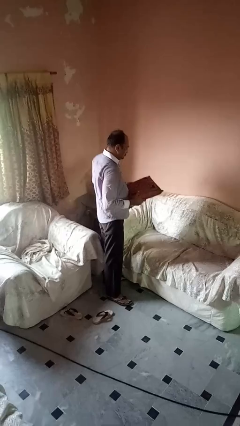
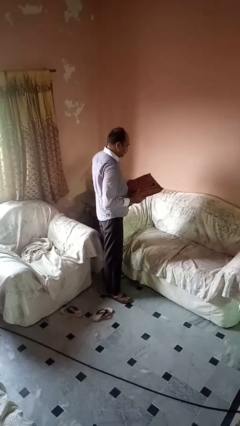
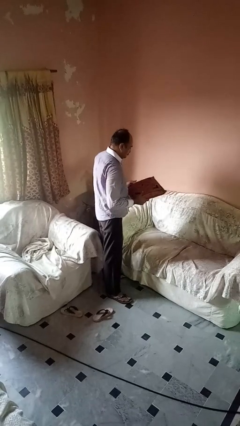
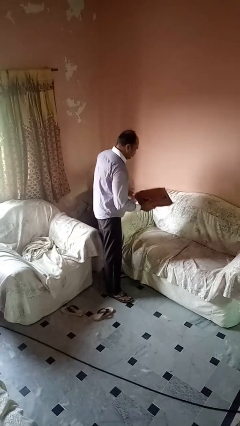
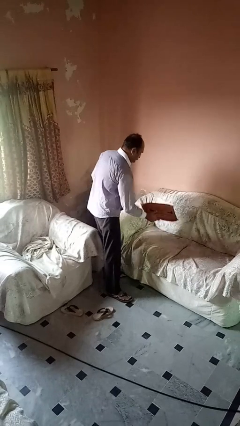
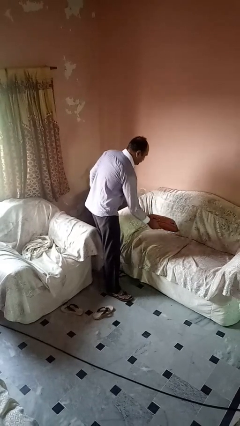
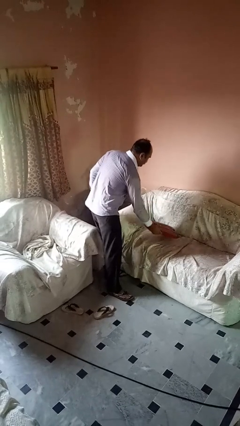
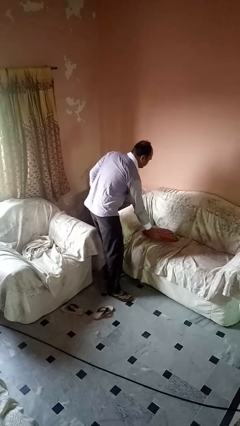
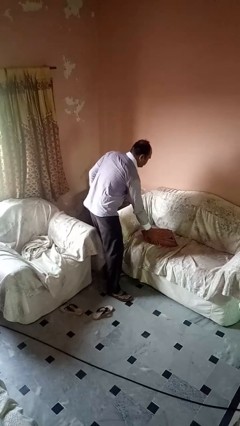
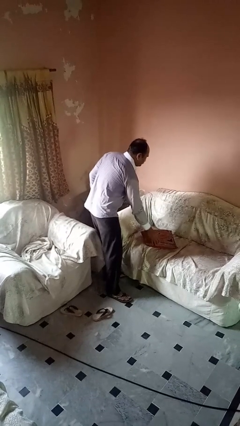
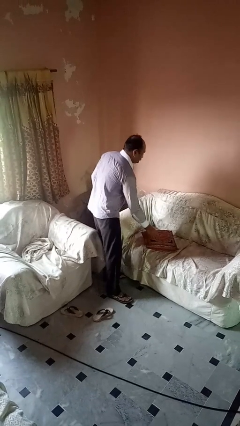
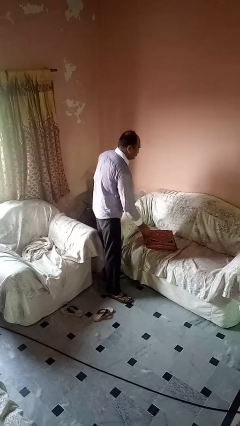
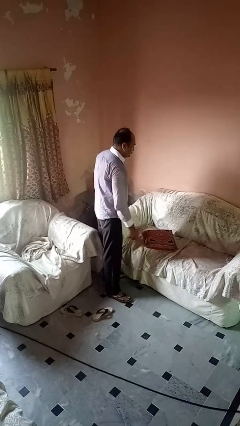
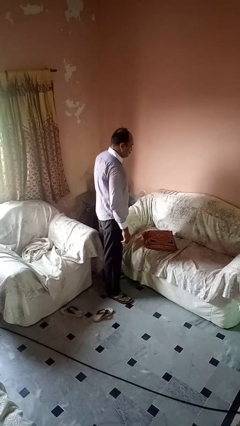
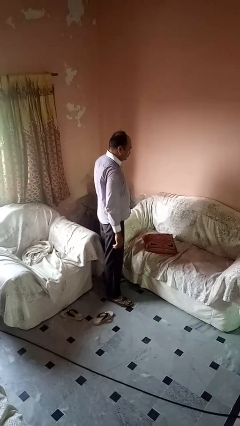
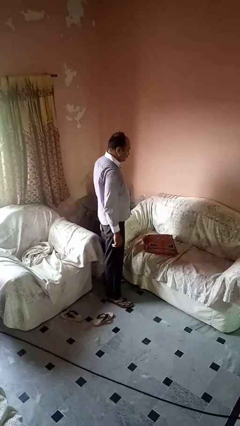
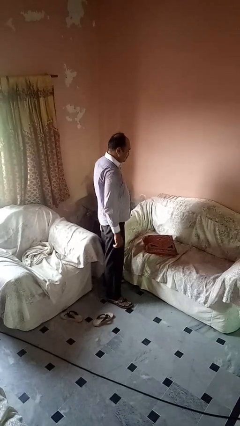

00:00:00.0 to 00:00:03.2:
person puts down object on couch

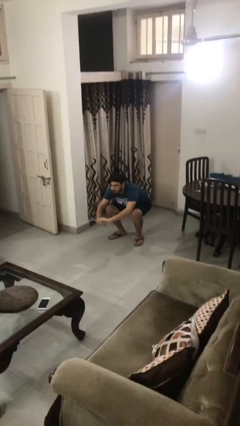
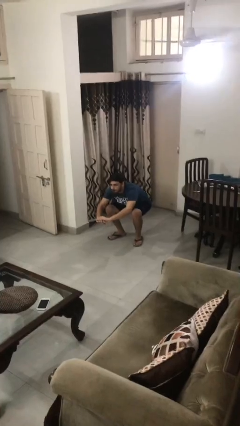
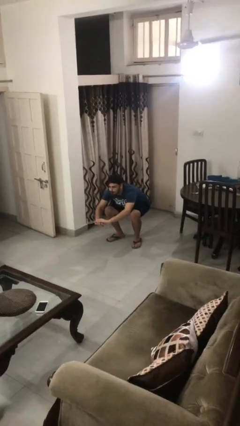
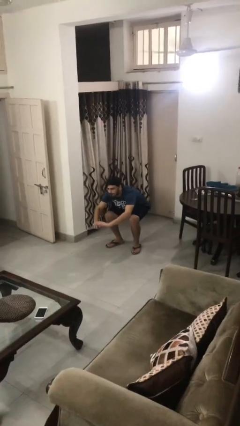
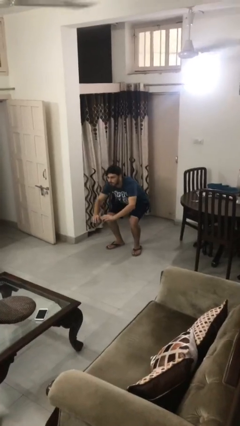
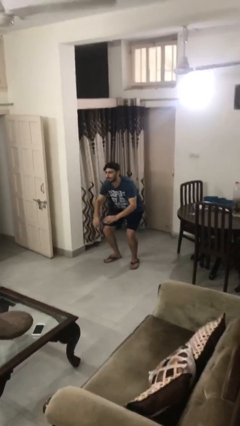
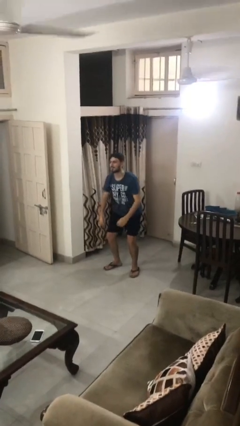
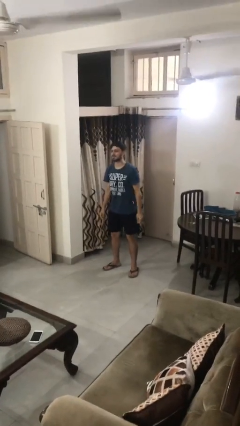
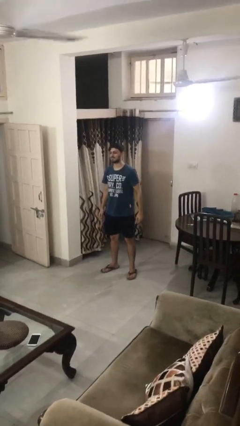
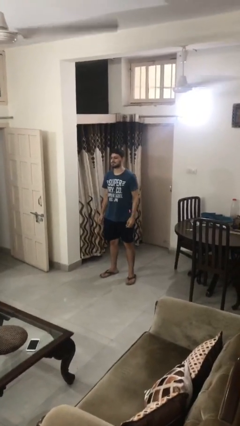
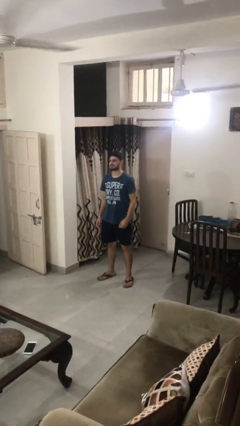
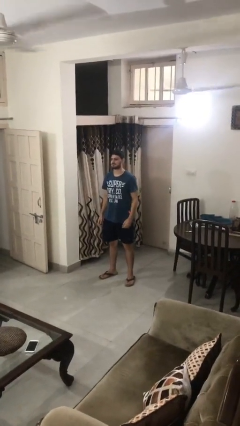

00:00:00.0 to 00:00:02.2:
person stands up

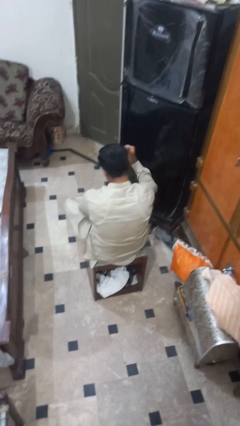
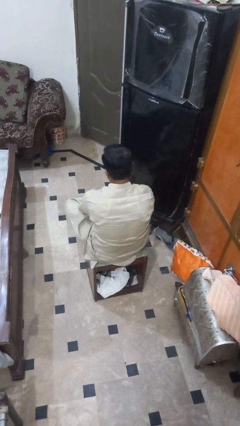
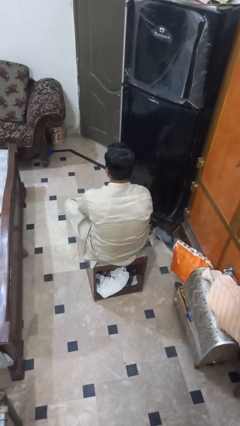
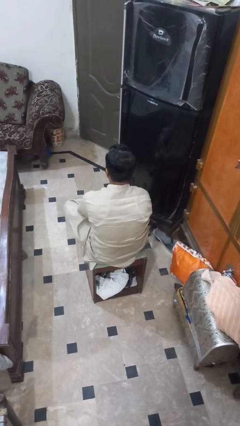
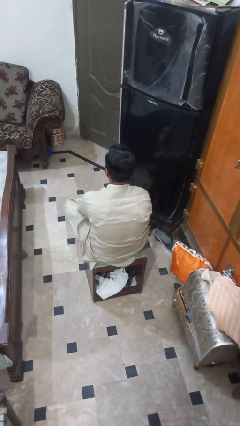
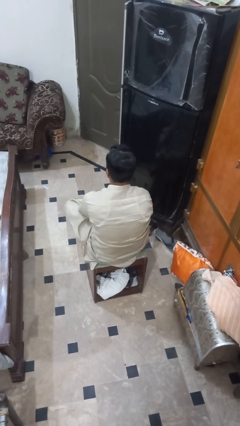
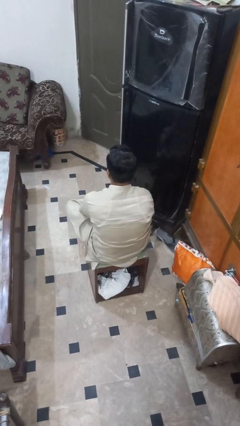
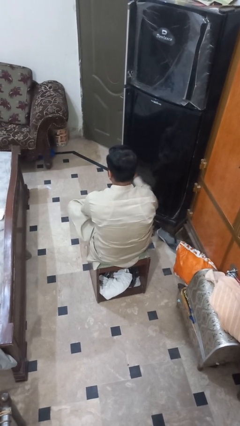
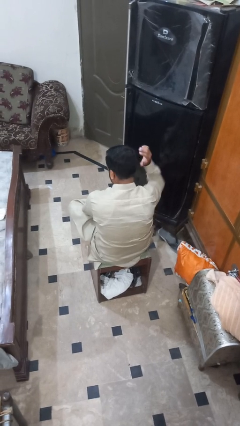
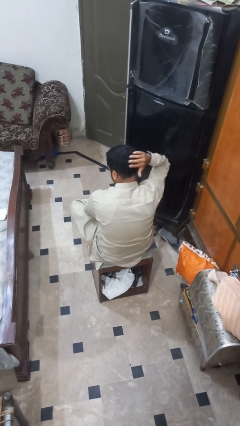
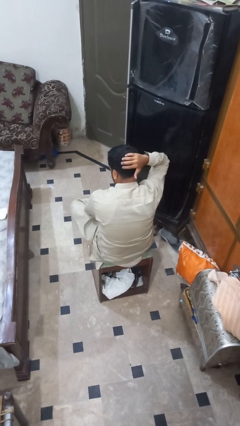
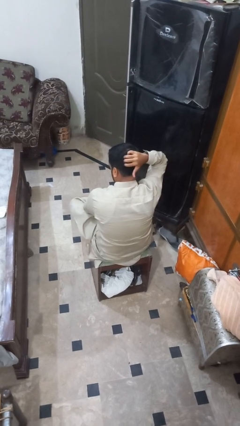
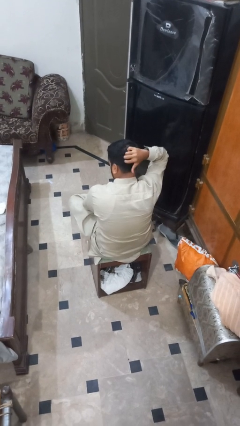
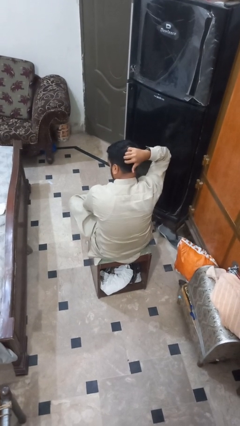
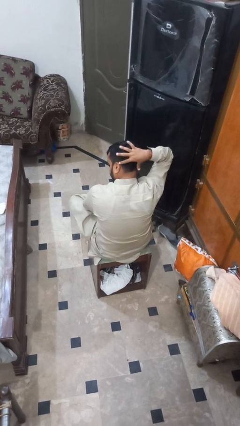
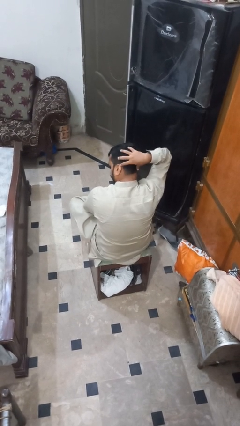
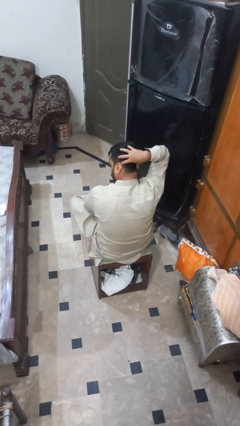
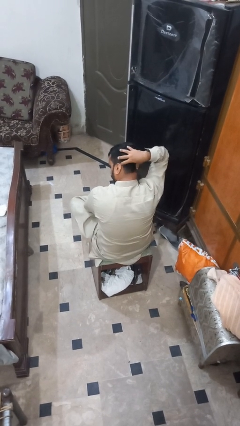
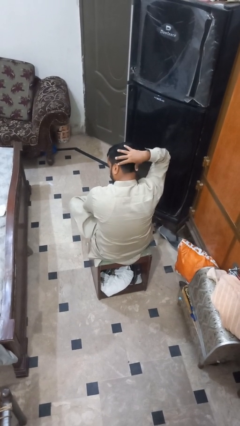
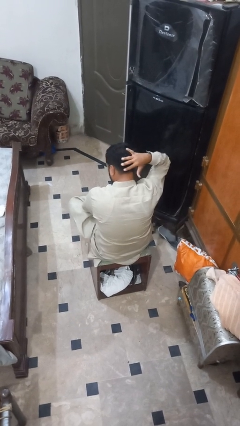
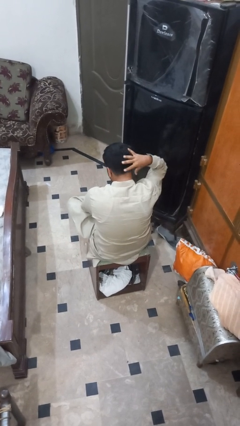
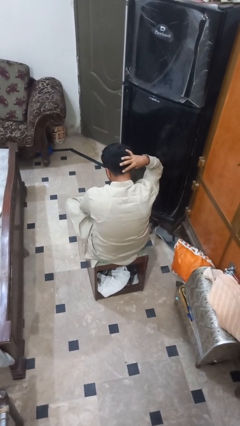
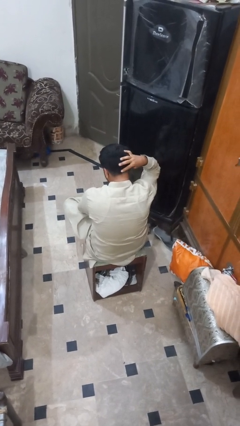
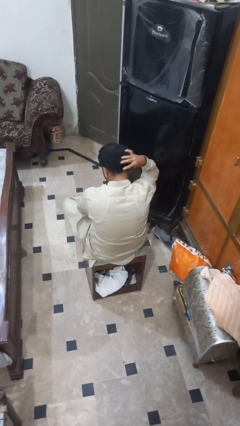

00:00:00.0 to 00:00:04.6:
person strokes hair

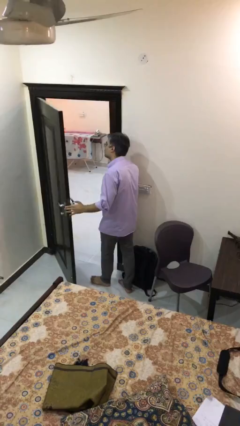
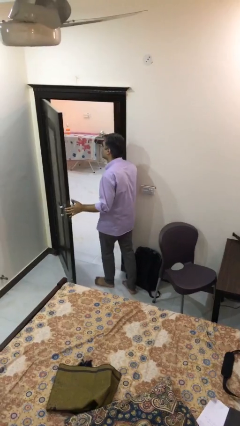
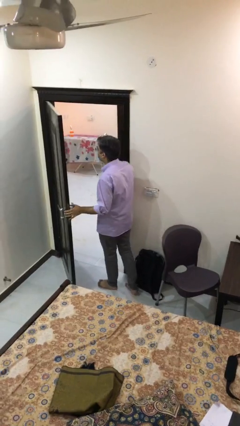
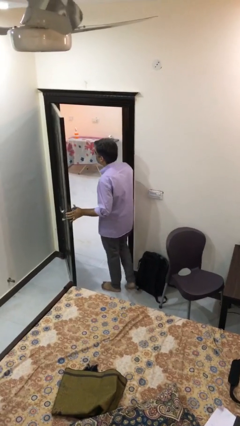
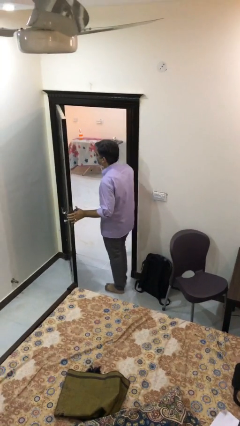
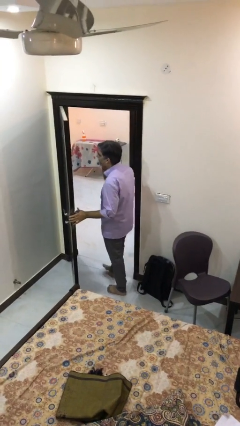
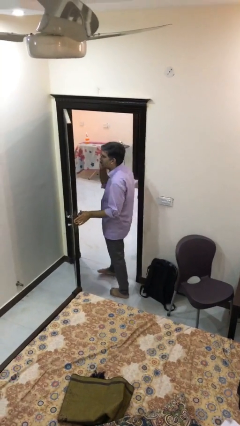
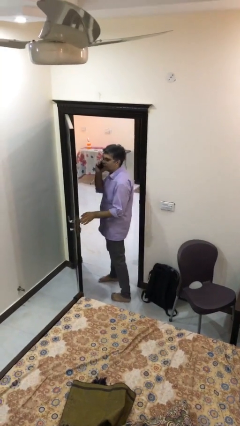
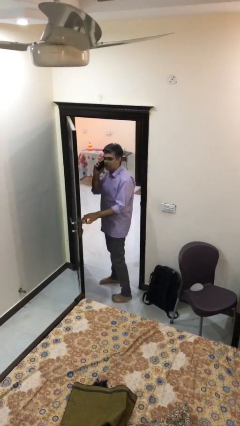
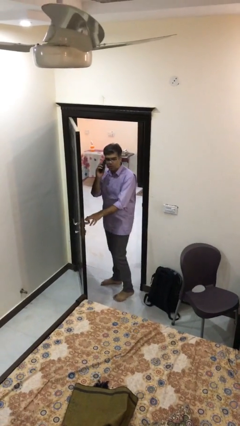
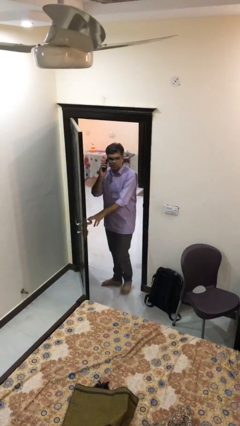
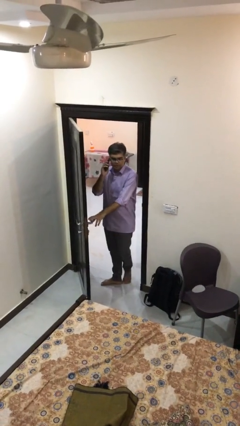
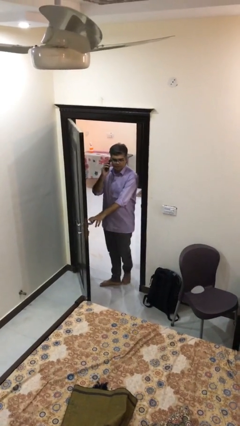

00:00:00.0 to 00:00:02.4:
person exits scene through structure

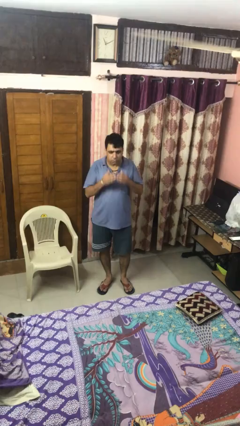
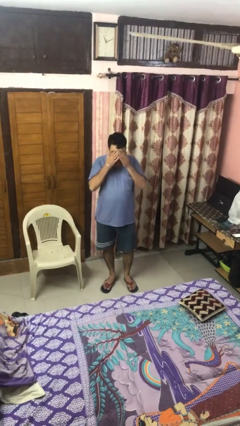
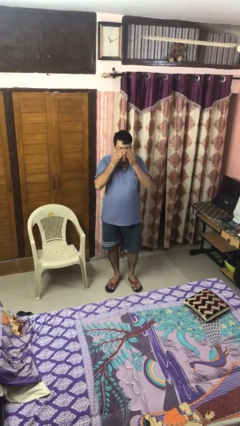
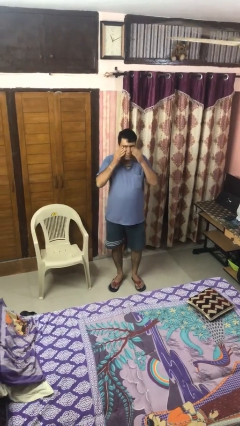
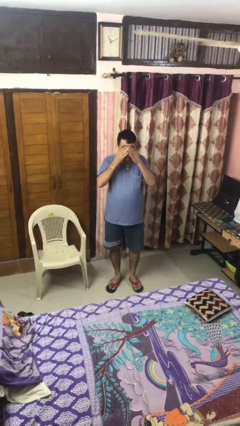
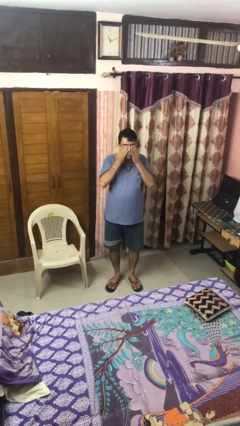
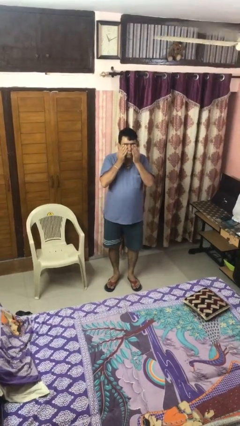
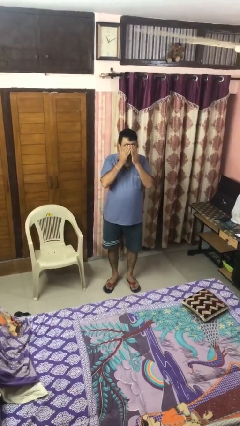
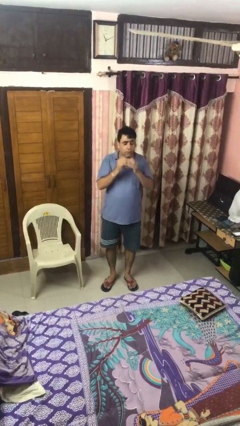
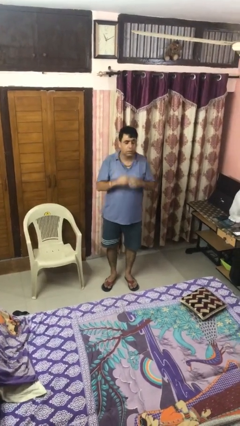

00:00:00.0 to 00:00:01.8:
person rubs eyes

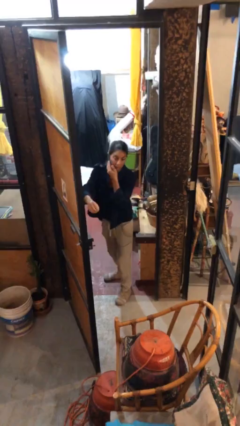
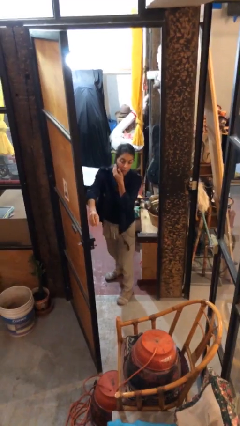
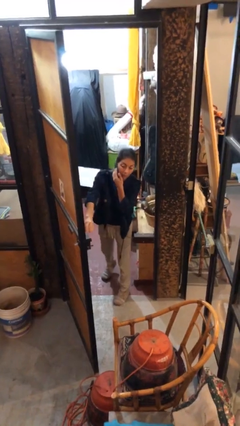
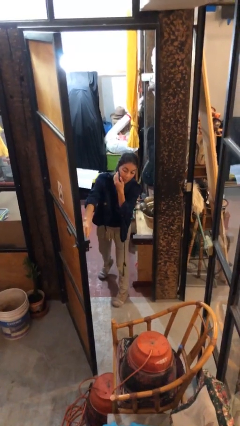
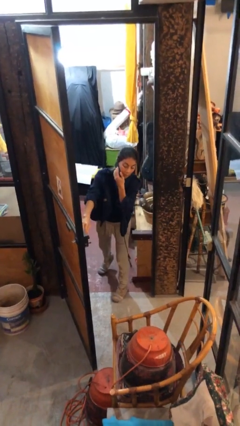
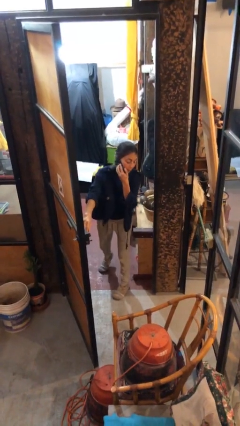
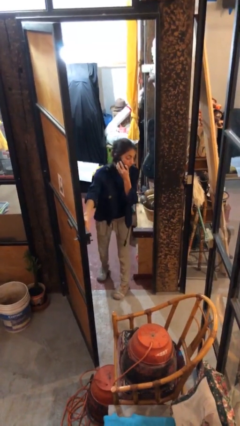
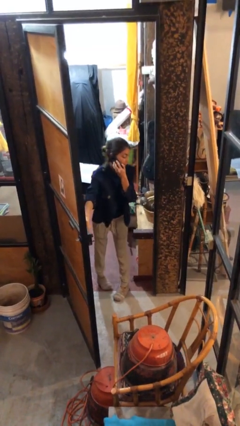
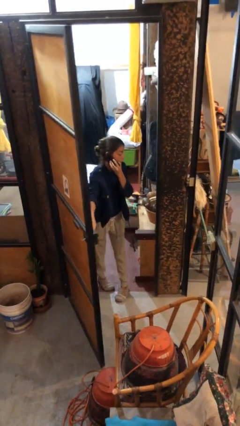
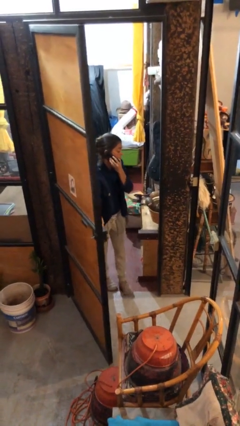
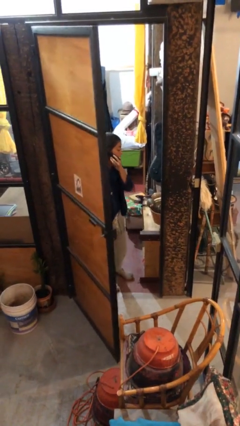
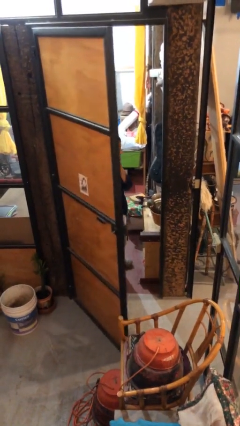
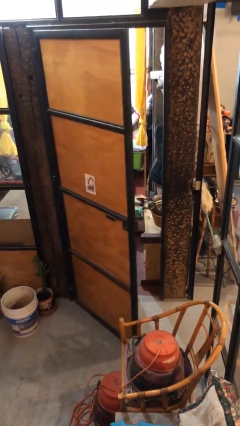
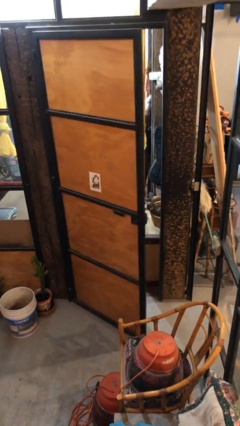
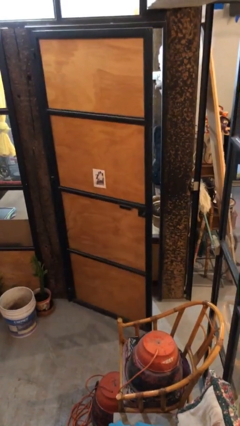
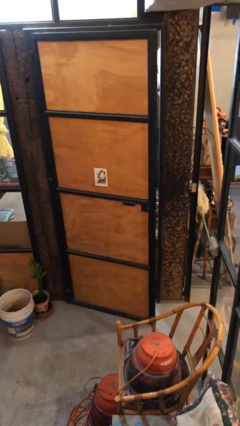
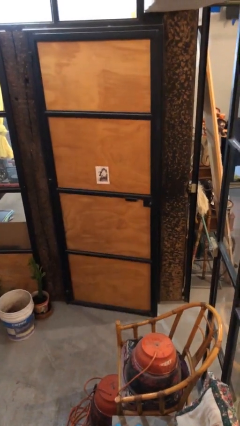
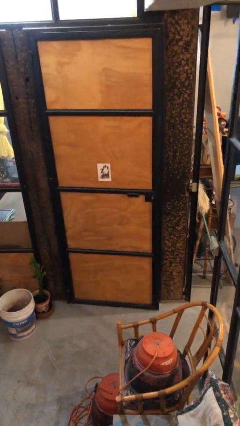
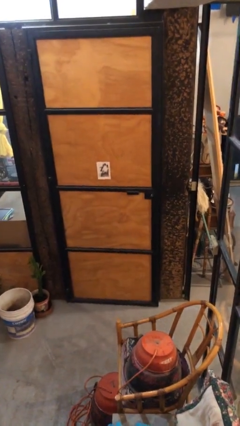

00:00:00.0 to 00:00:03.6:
person closes facility door
